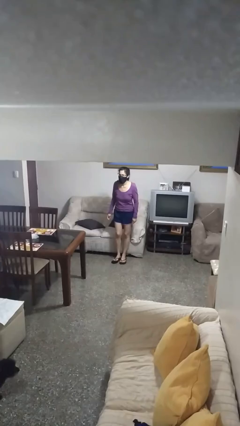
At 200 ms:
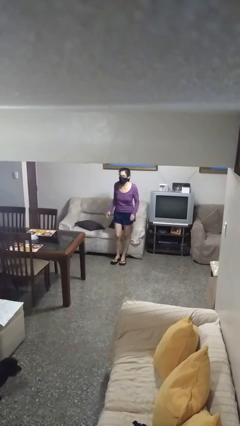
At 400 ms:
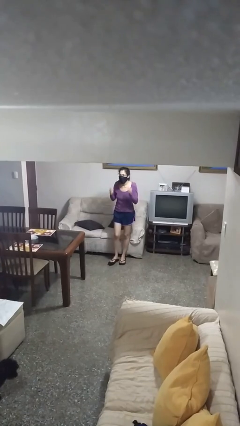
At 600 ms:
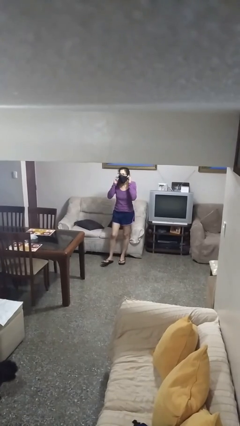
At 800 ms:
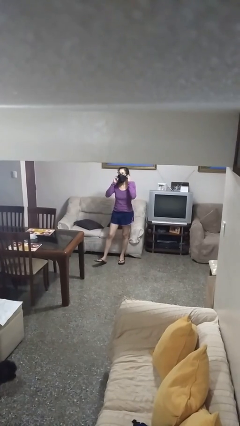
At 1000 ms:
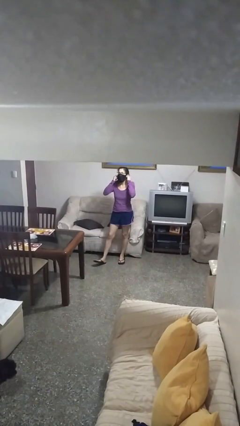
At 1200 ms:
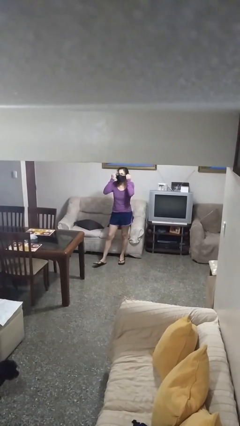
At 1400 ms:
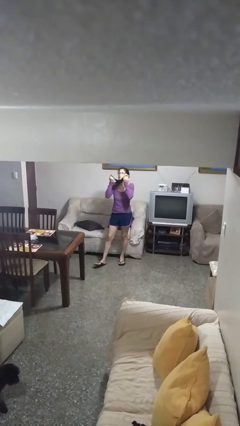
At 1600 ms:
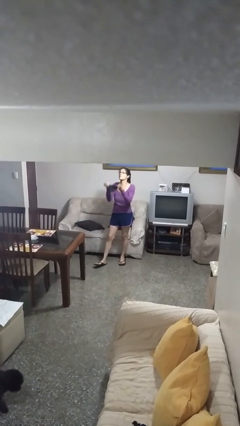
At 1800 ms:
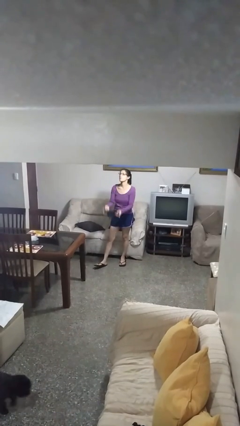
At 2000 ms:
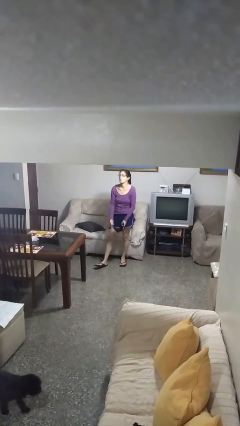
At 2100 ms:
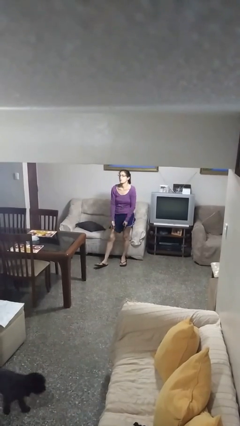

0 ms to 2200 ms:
person takes off facemask

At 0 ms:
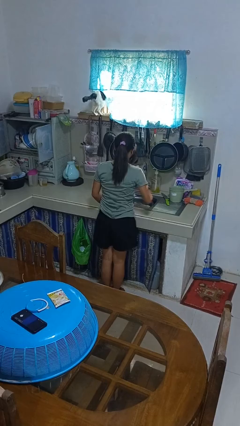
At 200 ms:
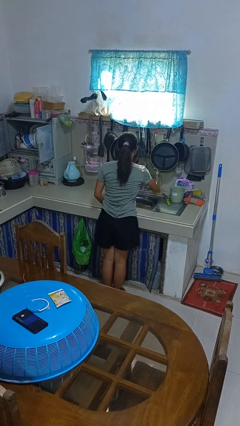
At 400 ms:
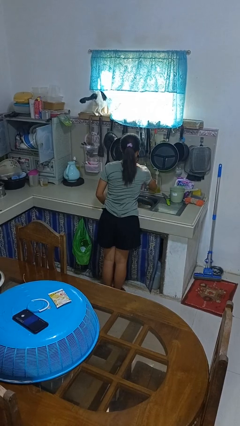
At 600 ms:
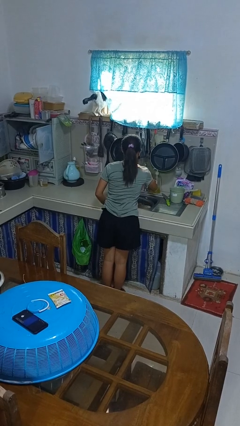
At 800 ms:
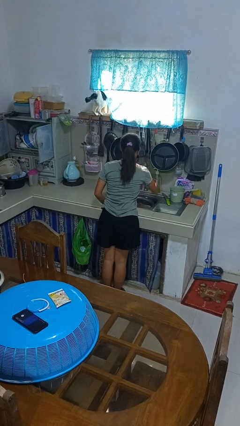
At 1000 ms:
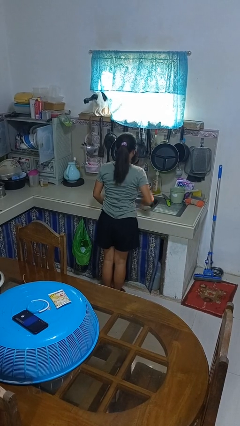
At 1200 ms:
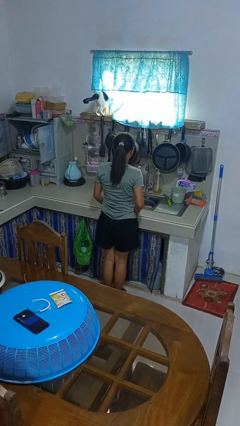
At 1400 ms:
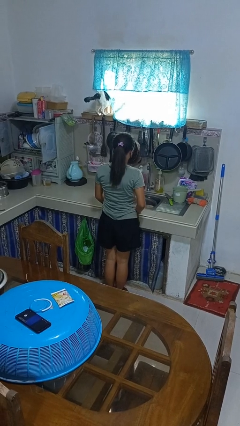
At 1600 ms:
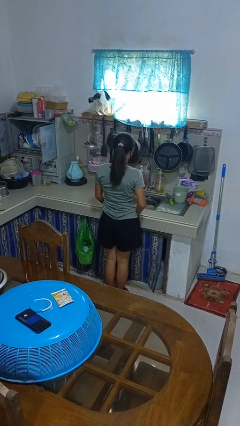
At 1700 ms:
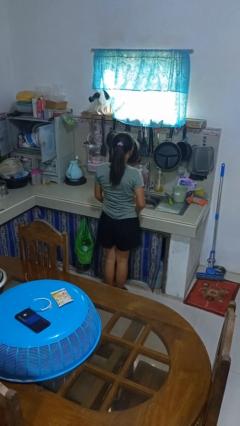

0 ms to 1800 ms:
person turns off faucet

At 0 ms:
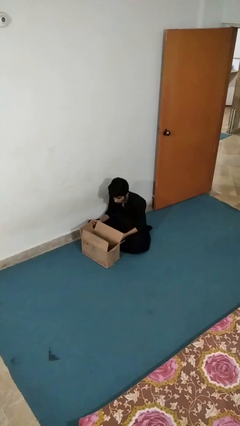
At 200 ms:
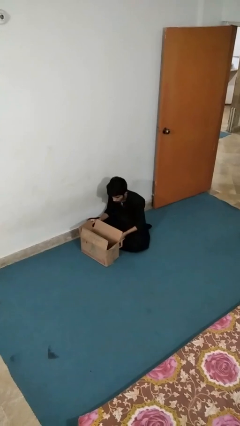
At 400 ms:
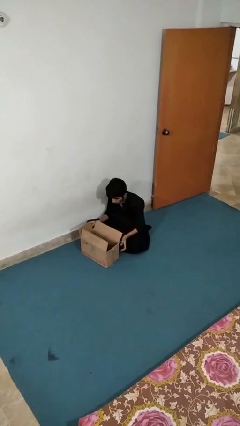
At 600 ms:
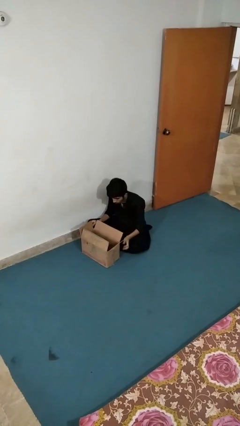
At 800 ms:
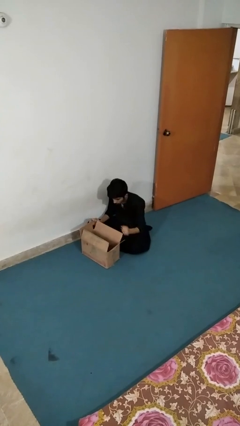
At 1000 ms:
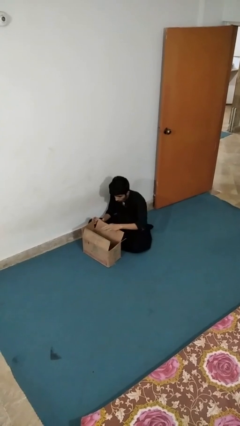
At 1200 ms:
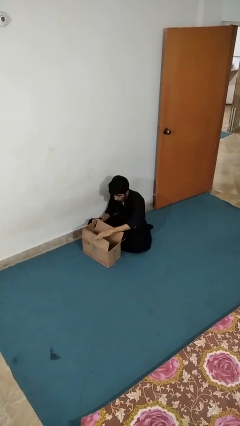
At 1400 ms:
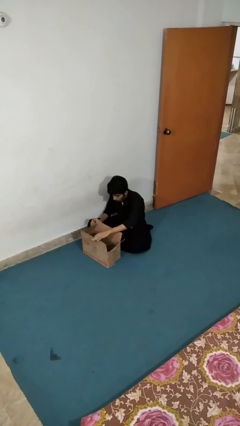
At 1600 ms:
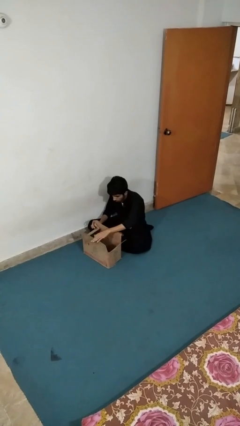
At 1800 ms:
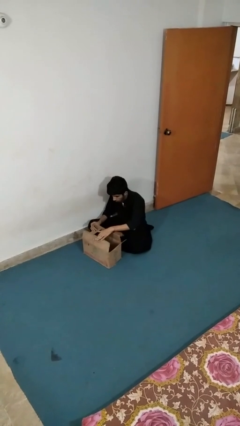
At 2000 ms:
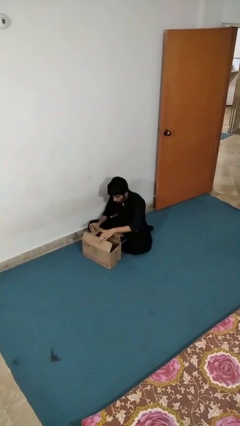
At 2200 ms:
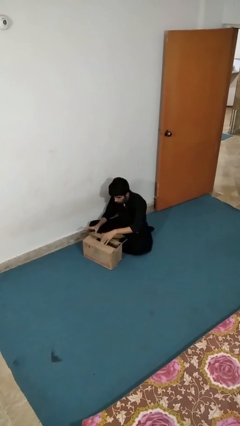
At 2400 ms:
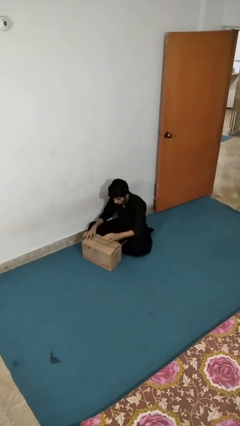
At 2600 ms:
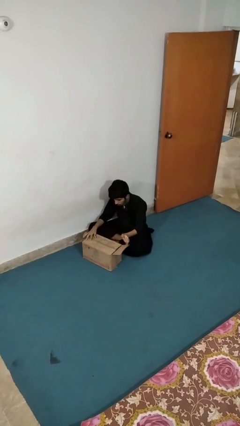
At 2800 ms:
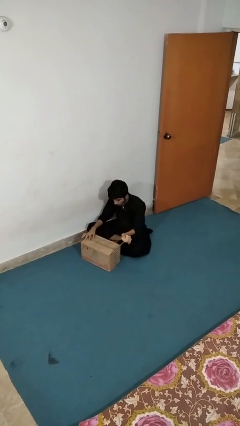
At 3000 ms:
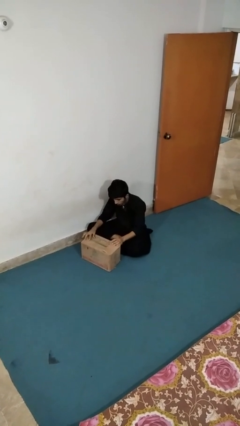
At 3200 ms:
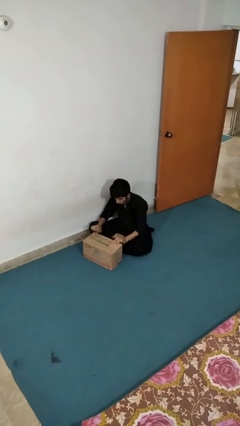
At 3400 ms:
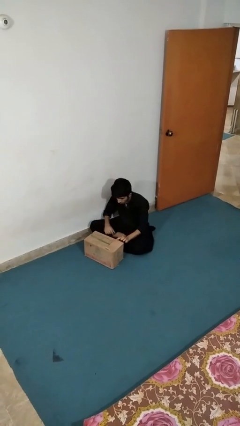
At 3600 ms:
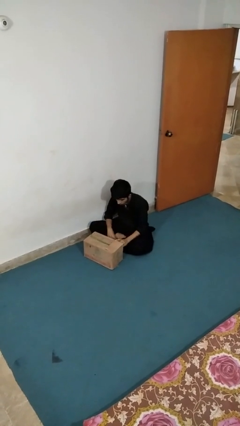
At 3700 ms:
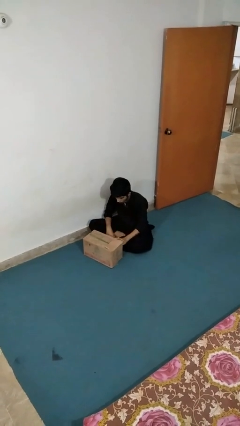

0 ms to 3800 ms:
person closes box

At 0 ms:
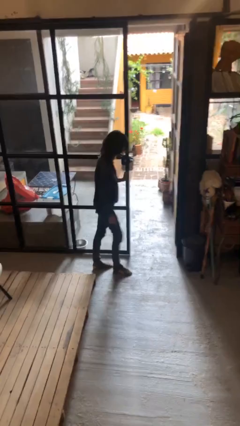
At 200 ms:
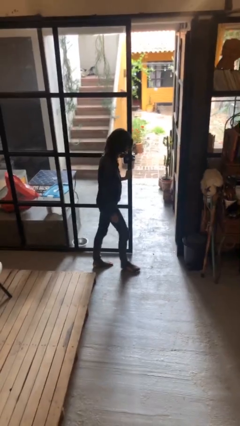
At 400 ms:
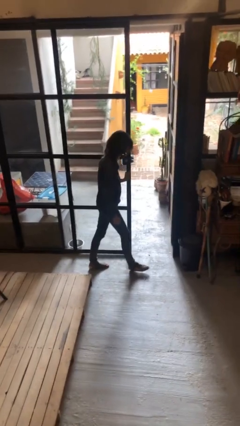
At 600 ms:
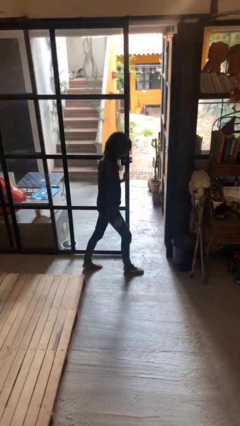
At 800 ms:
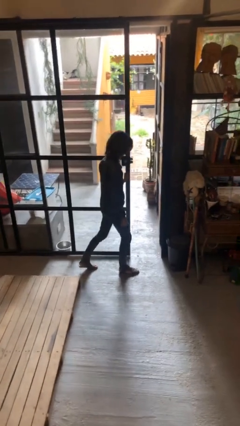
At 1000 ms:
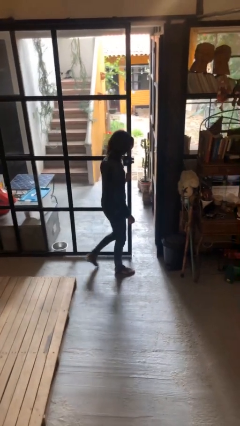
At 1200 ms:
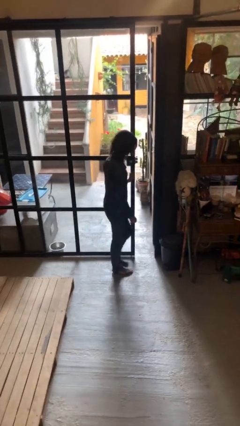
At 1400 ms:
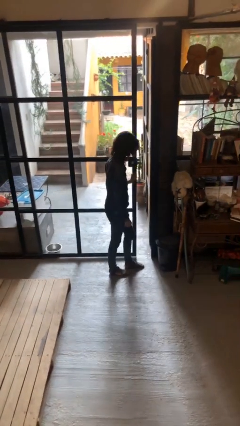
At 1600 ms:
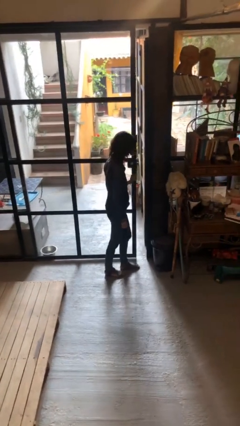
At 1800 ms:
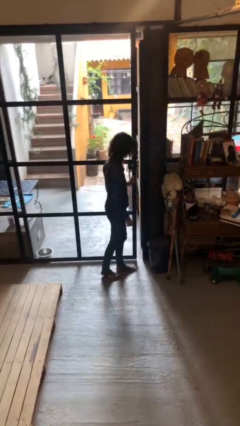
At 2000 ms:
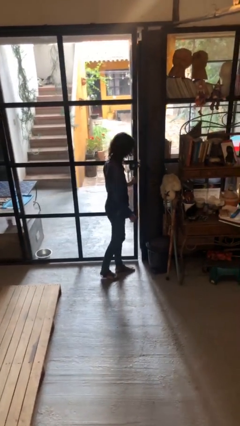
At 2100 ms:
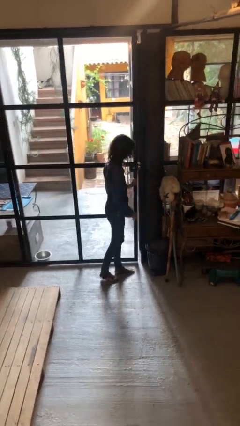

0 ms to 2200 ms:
person closes sliding door

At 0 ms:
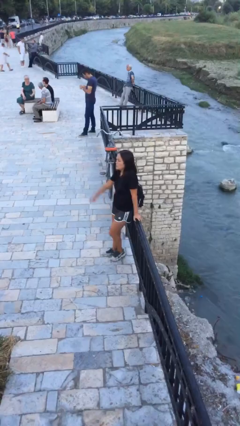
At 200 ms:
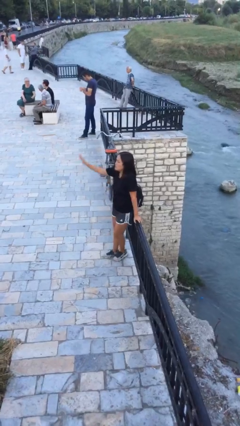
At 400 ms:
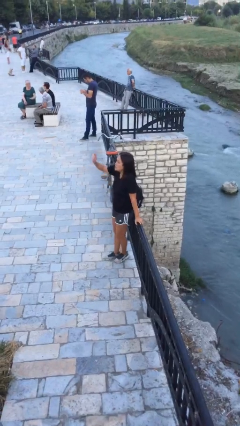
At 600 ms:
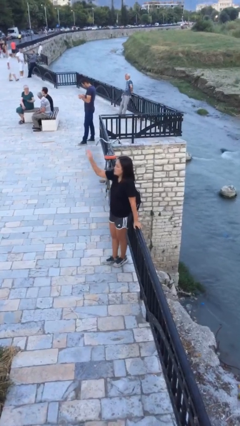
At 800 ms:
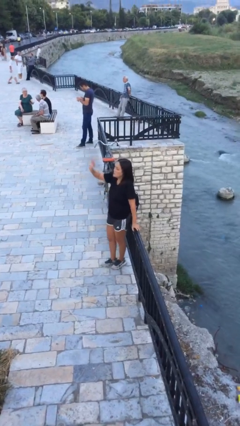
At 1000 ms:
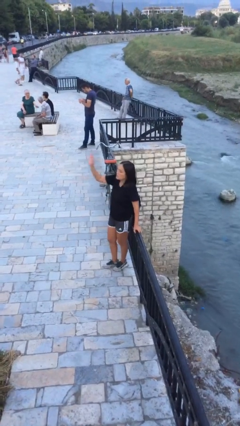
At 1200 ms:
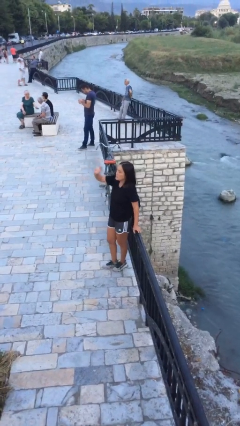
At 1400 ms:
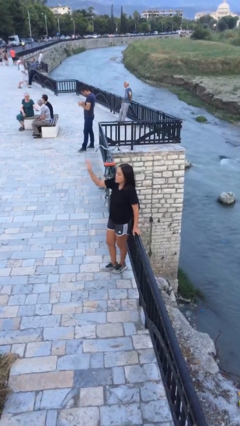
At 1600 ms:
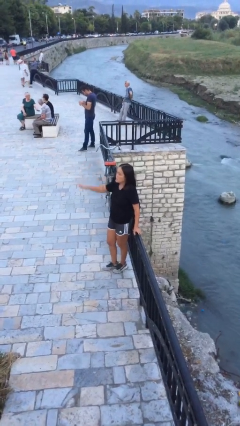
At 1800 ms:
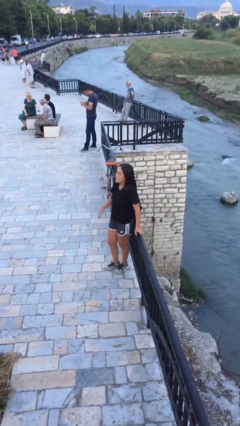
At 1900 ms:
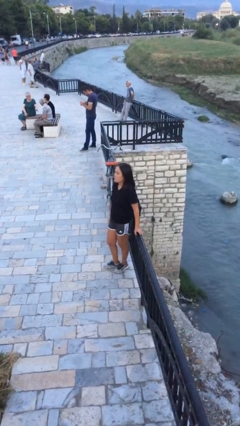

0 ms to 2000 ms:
person waves at person

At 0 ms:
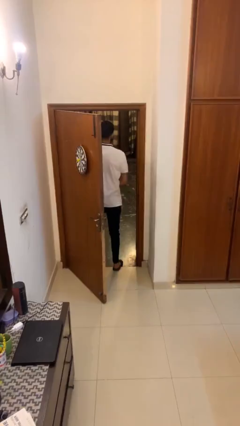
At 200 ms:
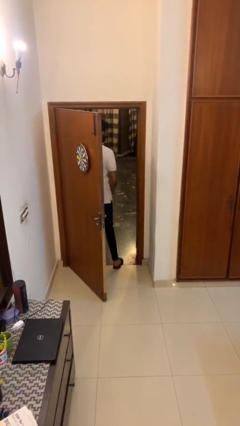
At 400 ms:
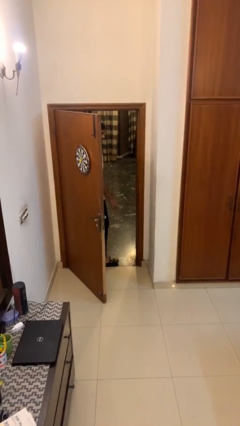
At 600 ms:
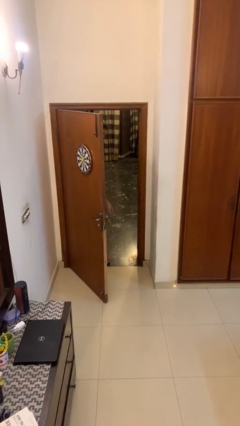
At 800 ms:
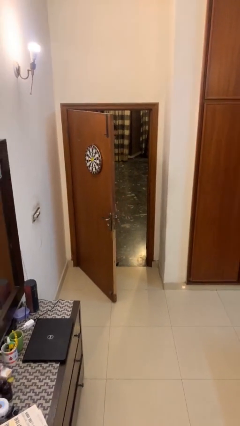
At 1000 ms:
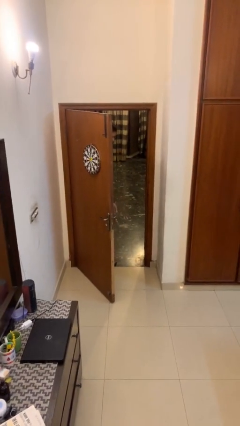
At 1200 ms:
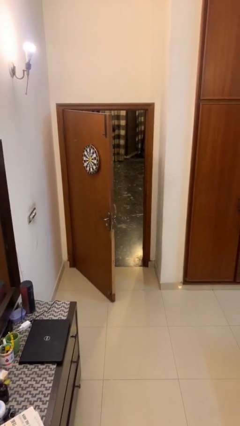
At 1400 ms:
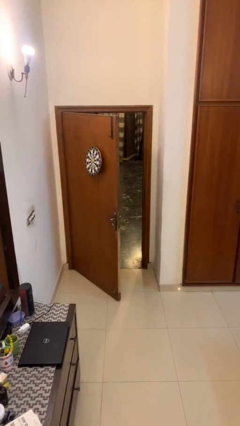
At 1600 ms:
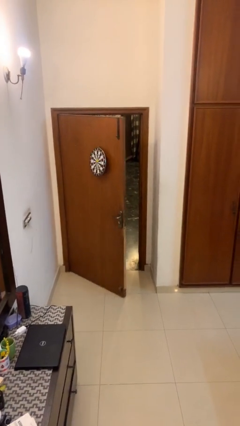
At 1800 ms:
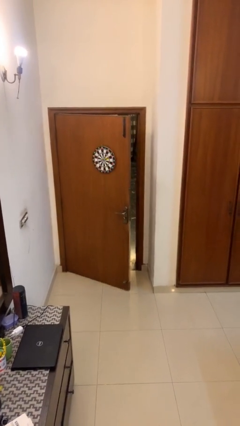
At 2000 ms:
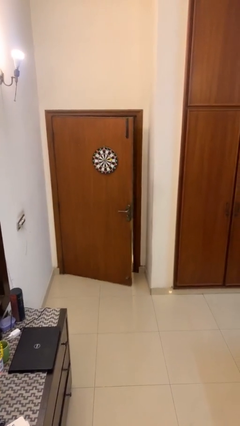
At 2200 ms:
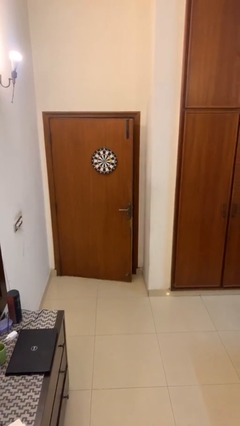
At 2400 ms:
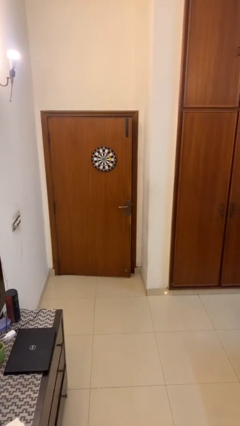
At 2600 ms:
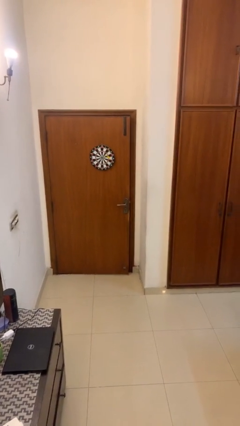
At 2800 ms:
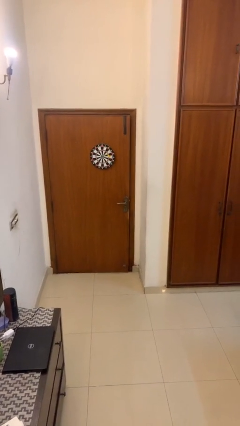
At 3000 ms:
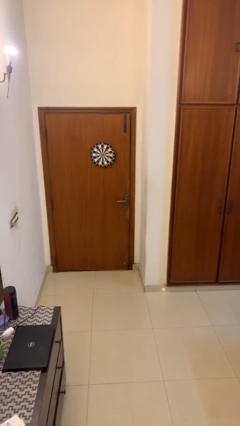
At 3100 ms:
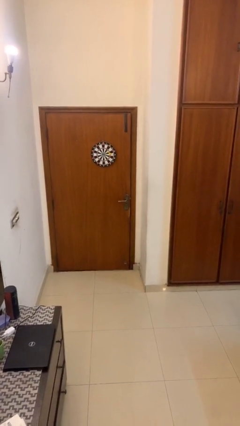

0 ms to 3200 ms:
person closes facility door

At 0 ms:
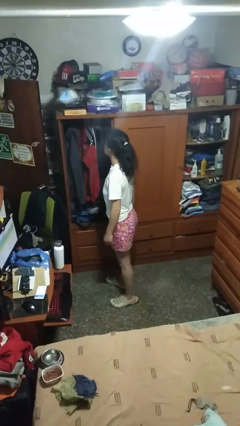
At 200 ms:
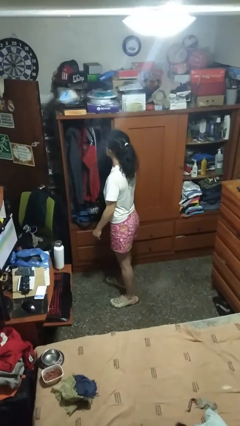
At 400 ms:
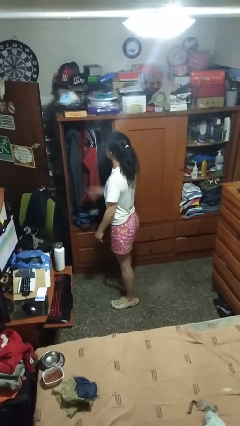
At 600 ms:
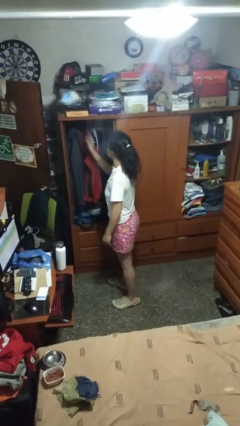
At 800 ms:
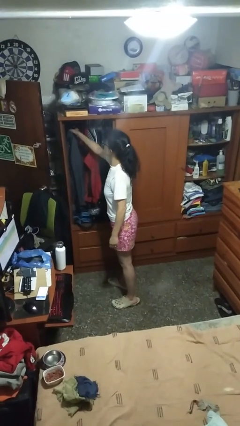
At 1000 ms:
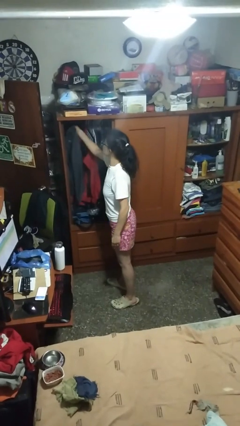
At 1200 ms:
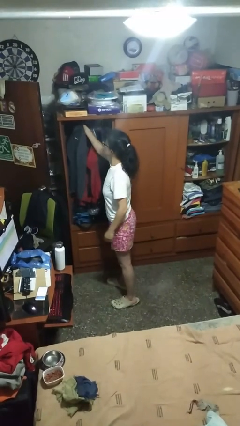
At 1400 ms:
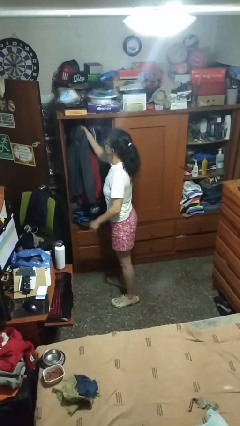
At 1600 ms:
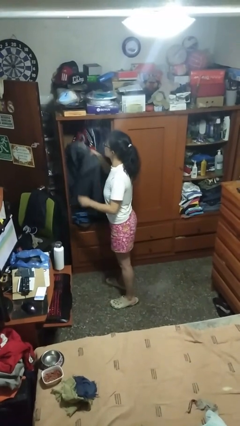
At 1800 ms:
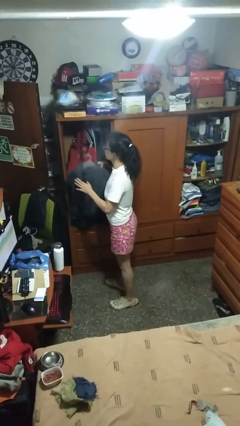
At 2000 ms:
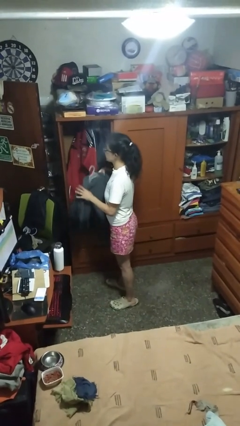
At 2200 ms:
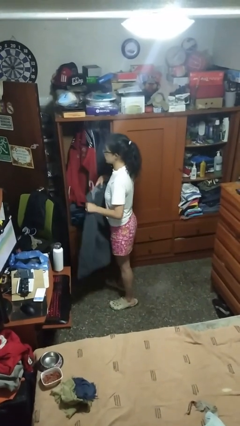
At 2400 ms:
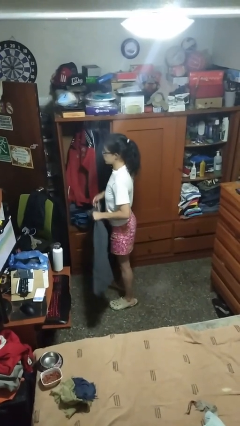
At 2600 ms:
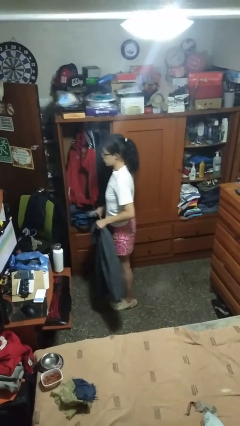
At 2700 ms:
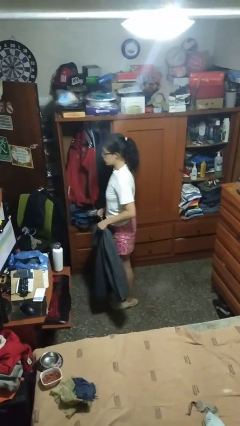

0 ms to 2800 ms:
person takes clothes from closet
